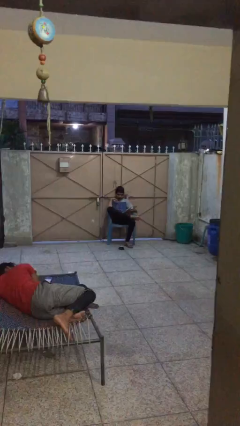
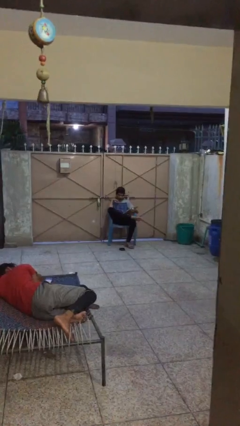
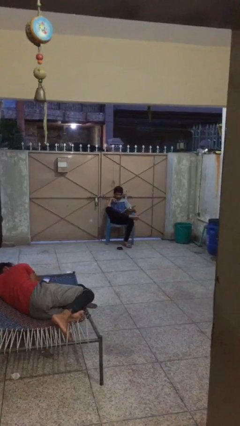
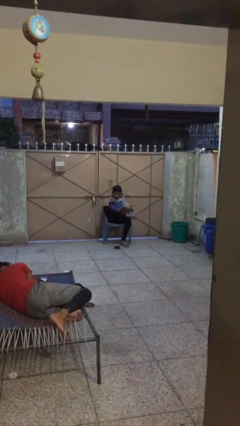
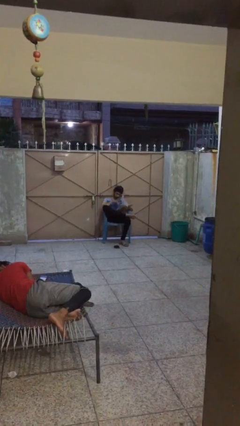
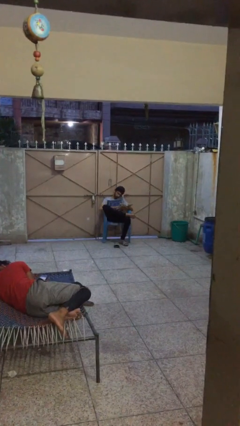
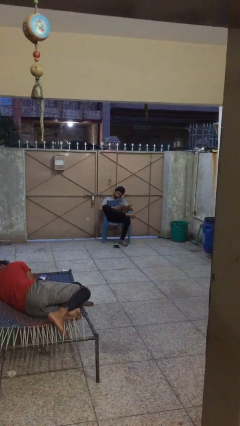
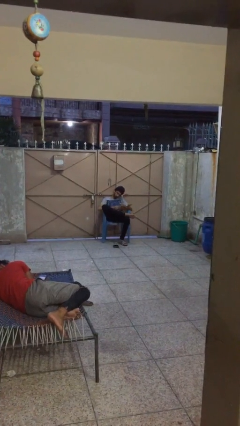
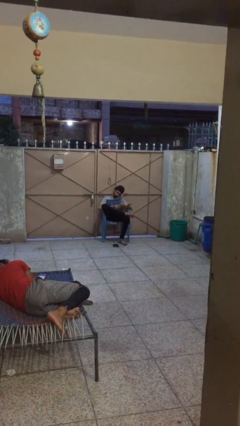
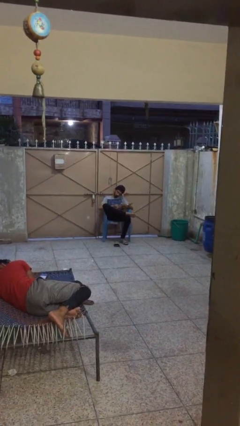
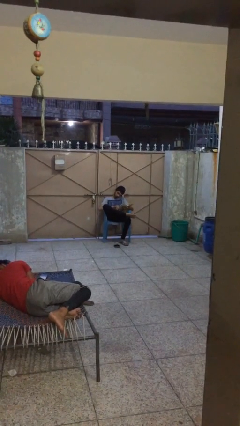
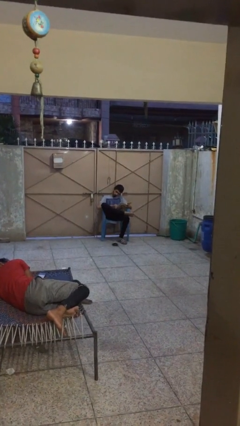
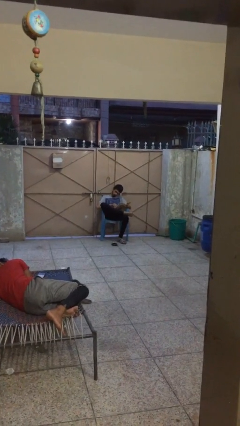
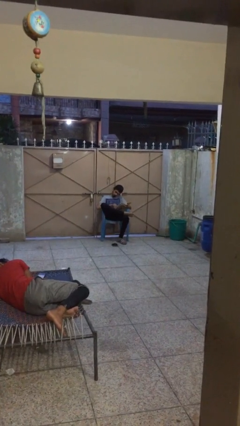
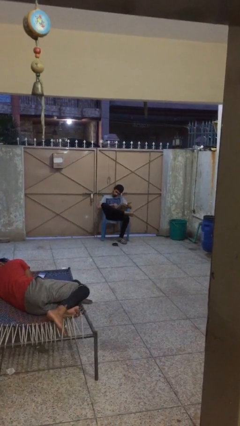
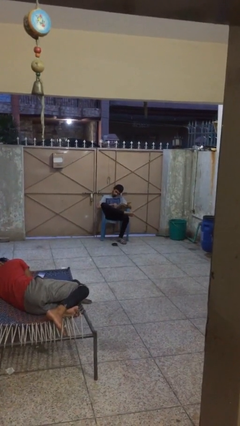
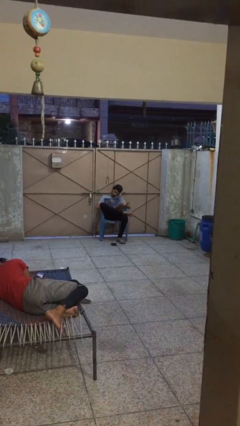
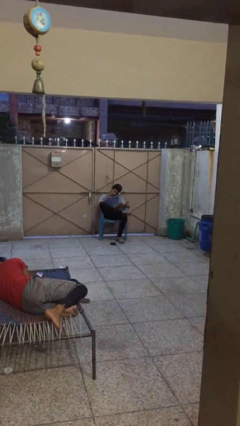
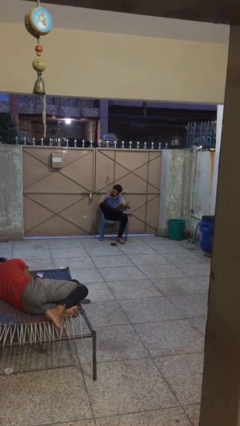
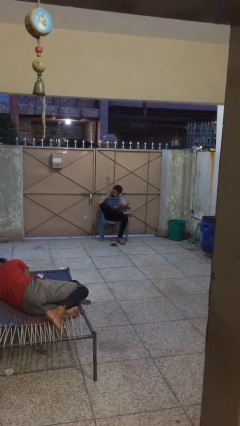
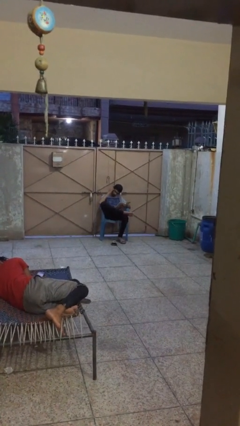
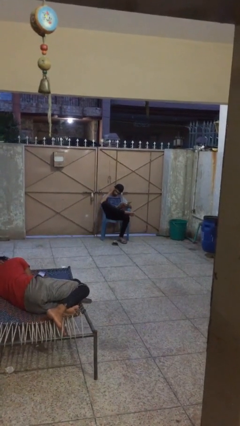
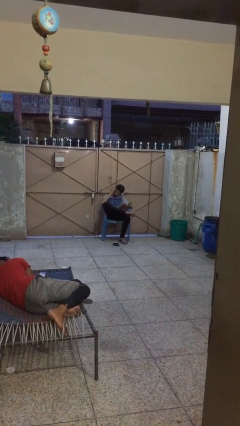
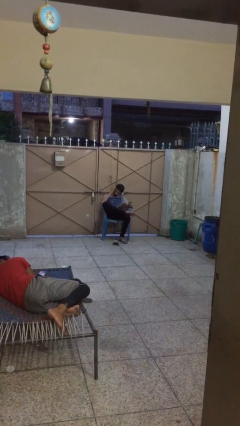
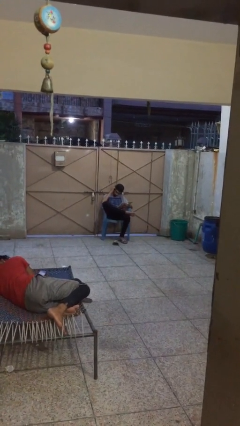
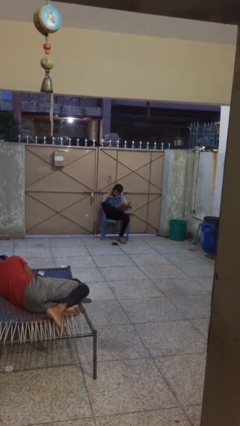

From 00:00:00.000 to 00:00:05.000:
person reads document

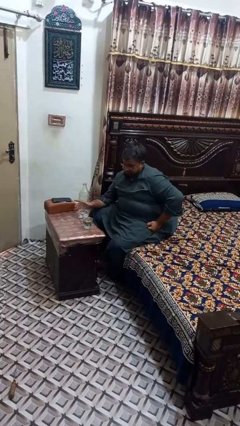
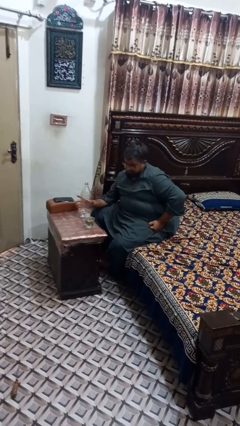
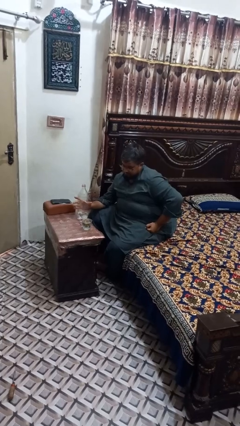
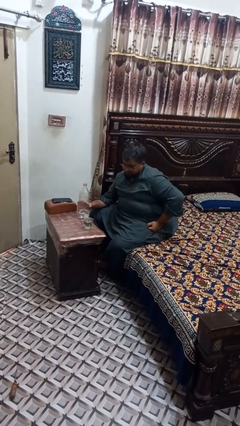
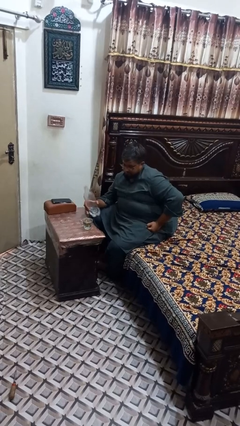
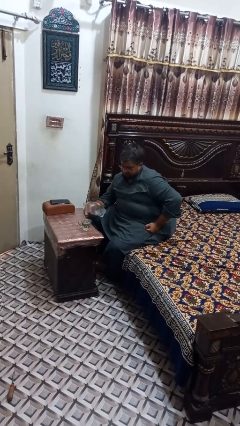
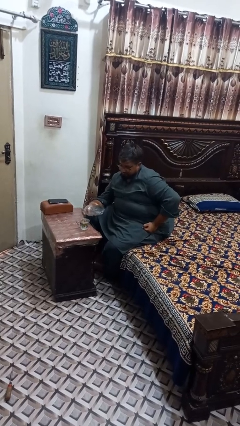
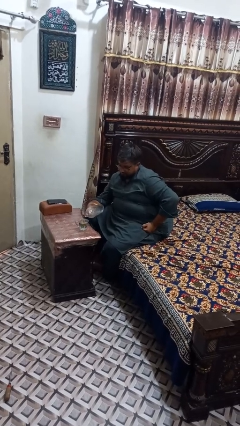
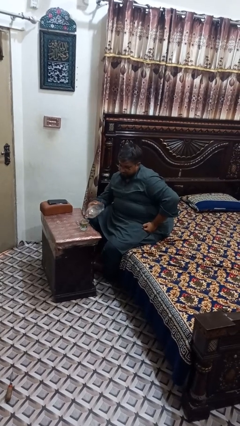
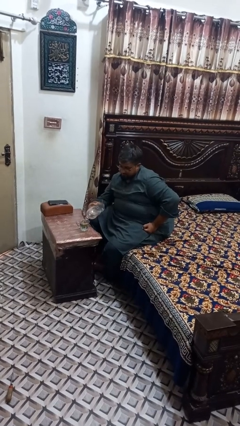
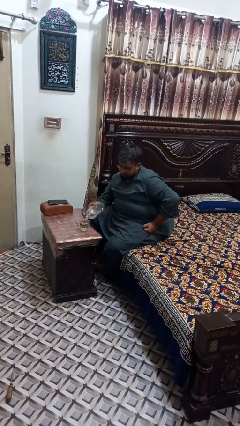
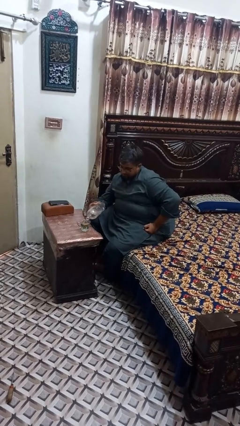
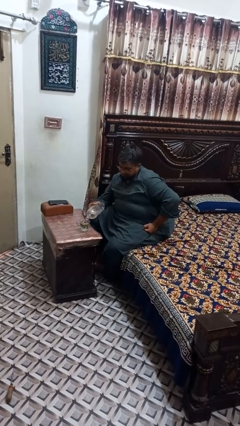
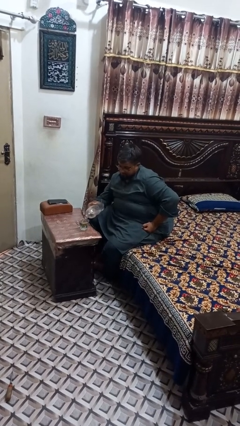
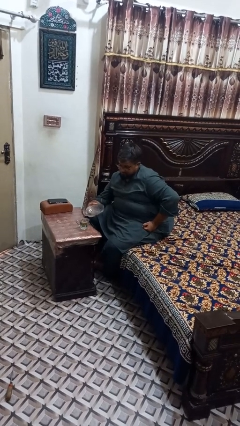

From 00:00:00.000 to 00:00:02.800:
person pours liquid into cup

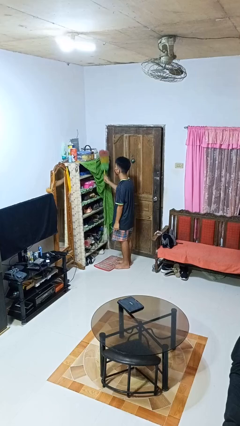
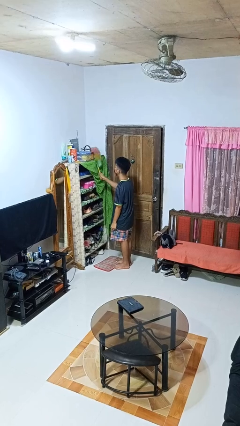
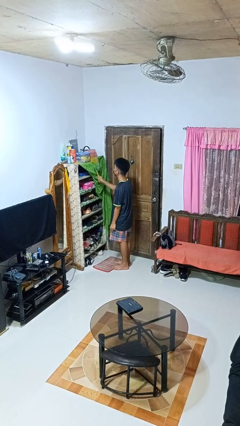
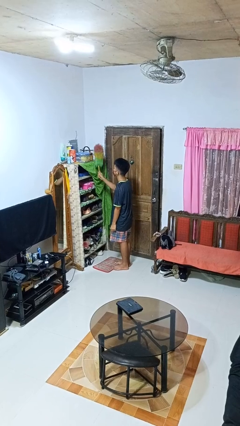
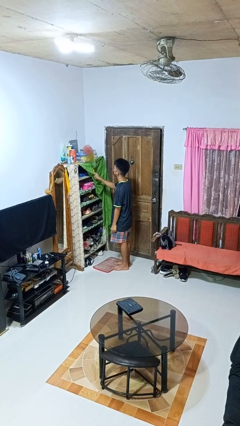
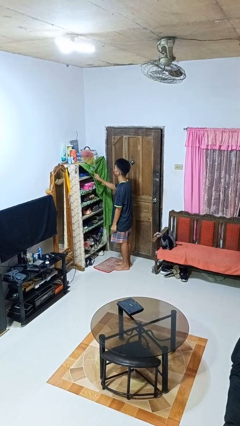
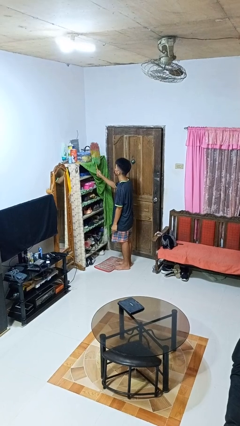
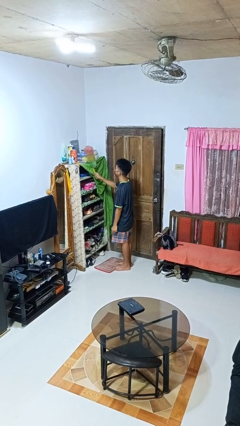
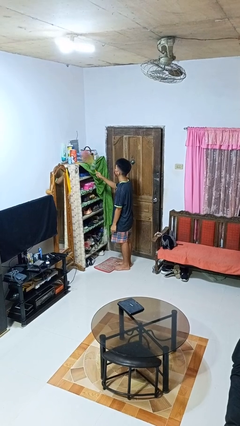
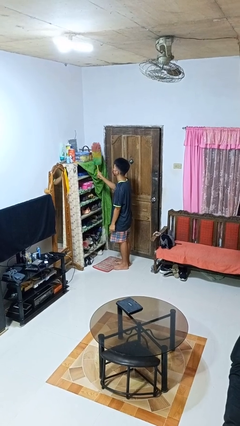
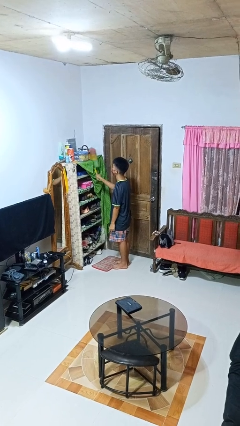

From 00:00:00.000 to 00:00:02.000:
person dusts furniture

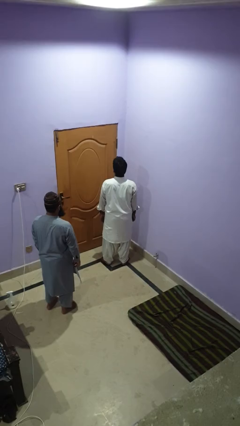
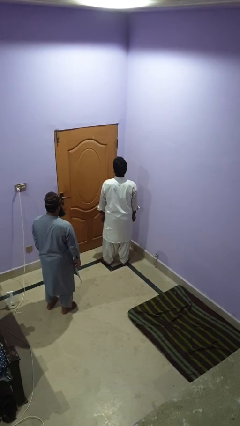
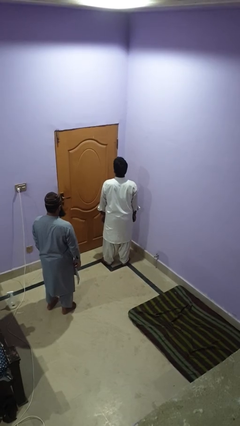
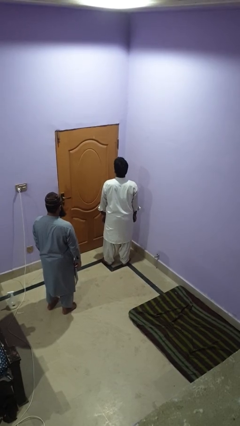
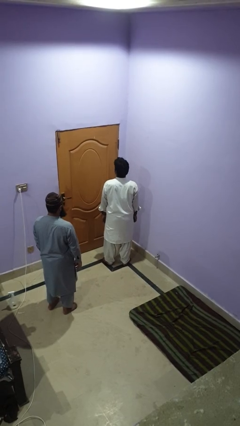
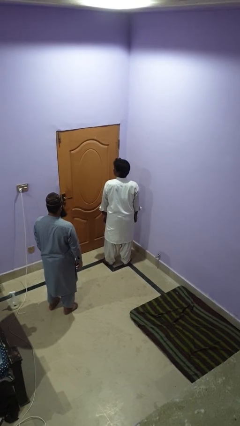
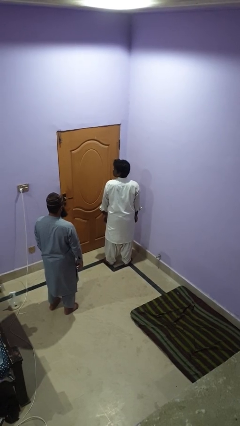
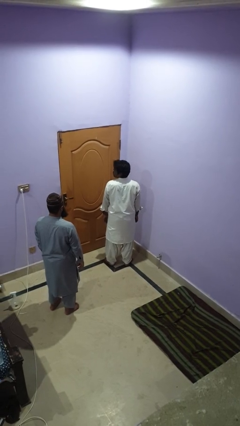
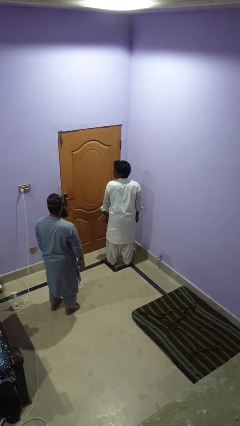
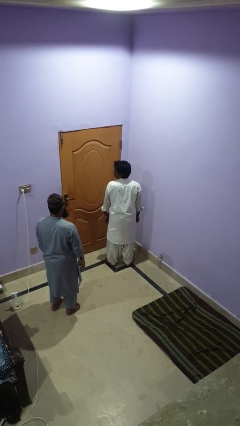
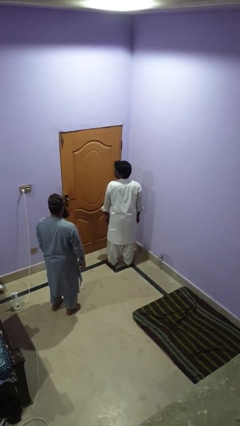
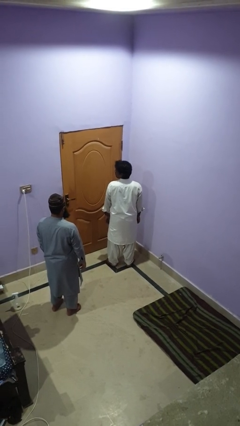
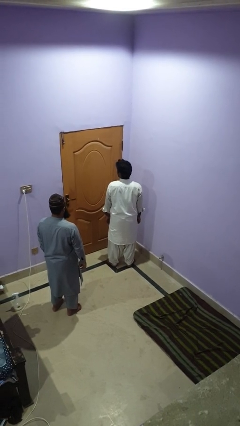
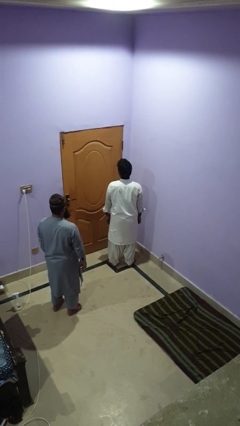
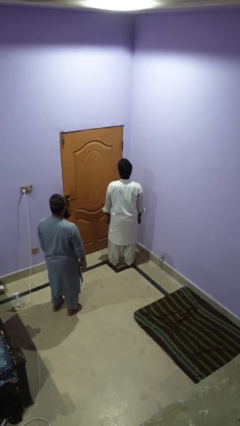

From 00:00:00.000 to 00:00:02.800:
person looks over shoulder

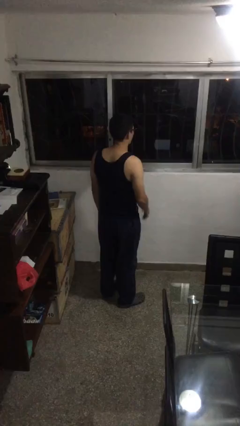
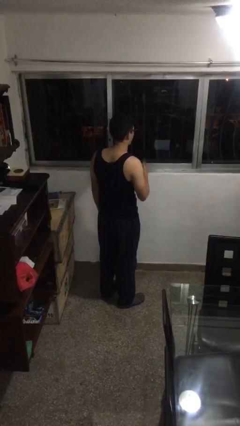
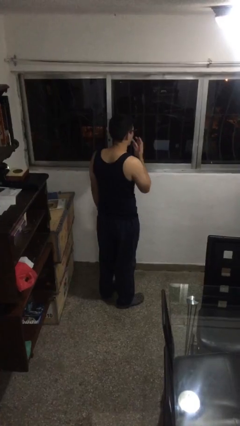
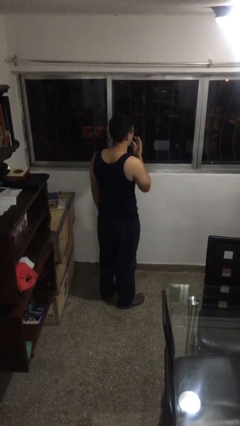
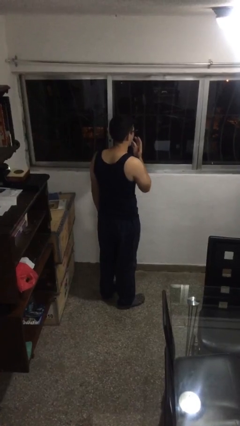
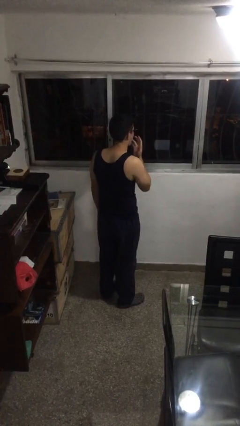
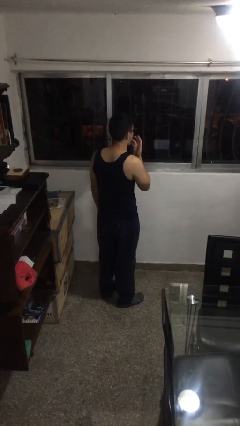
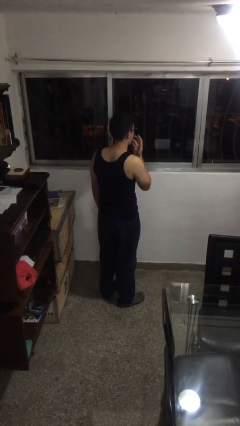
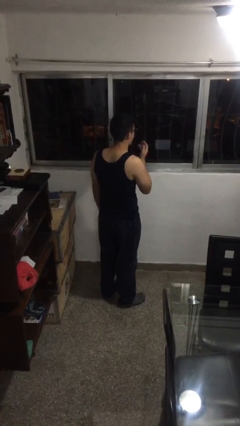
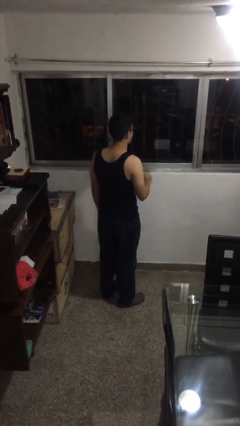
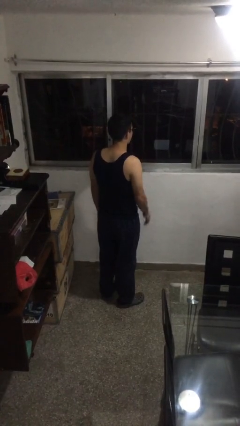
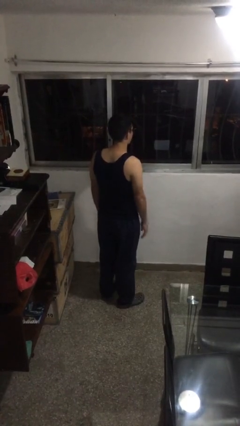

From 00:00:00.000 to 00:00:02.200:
person licks fingers

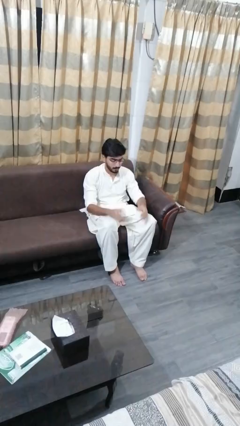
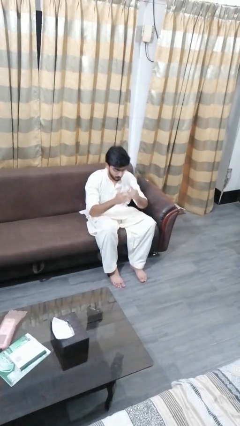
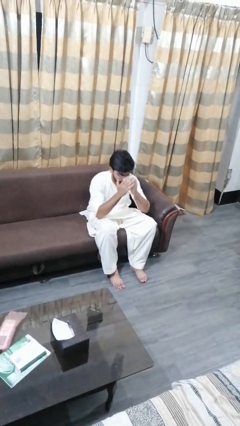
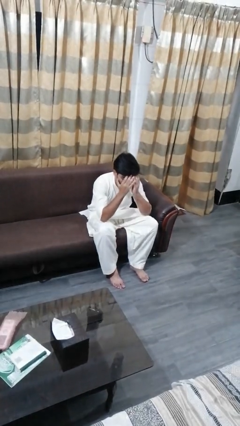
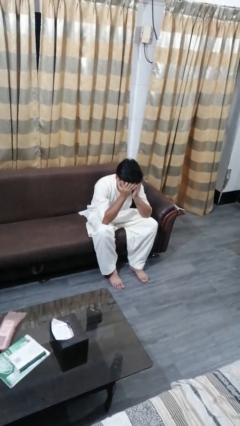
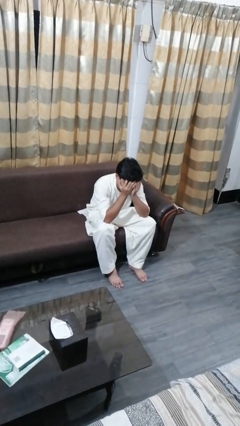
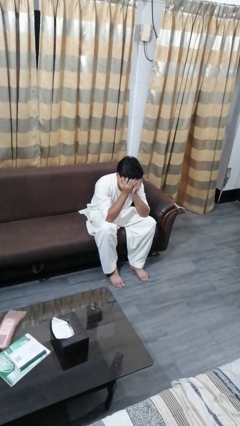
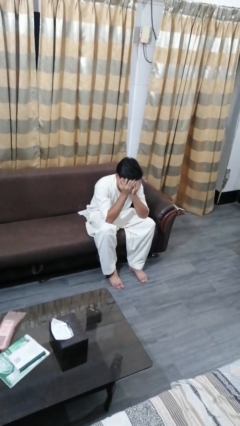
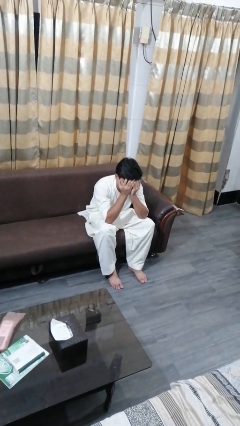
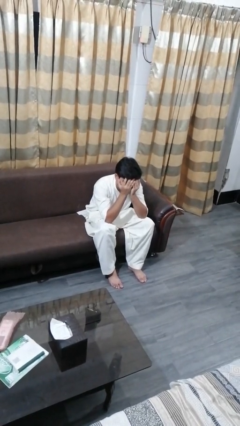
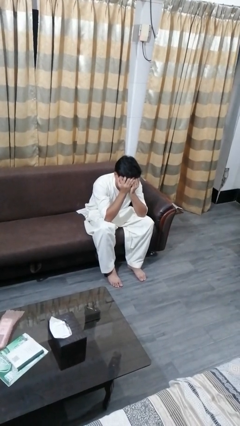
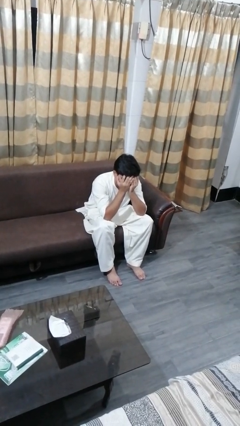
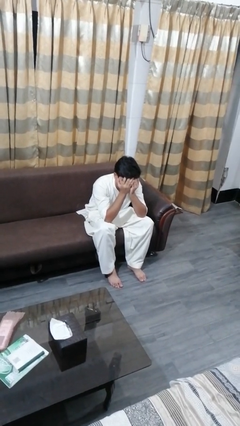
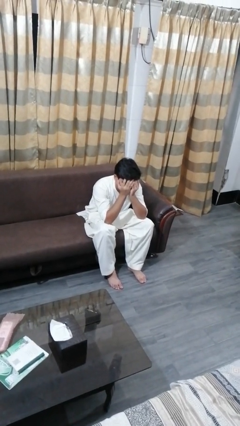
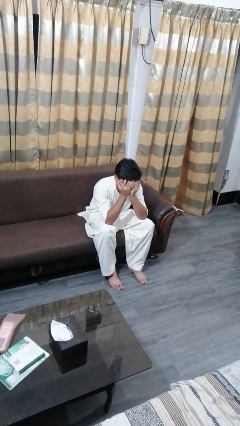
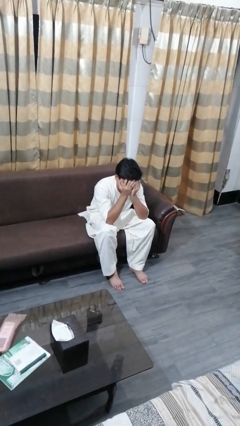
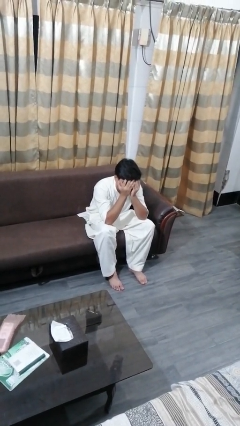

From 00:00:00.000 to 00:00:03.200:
person covers face with hands
